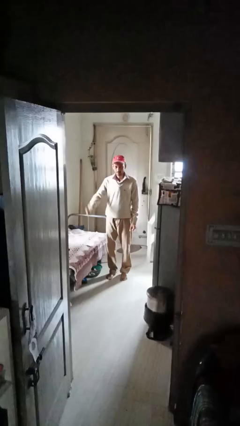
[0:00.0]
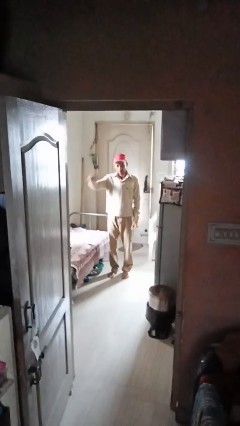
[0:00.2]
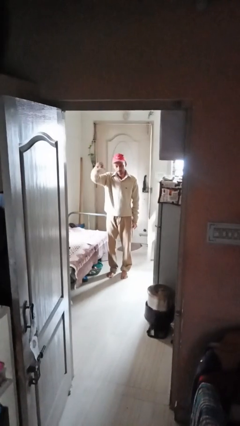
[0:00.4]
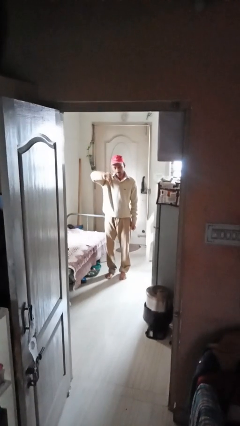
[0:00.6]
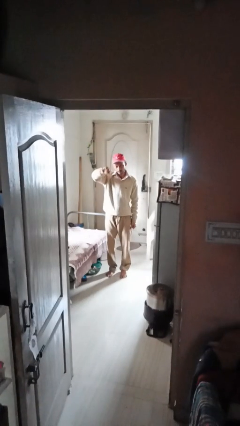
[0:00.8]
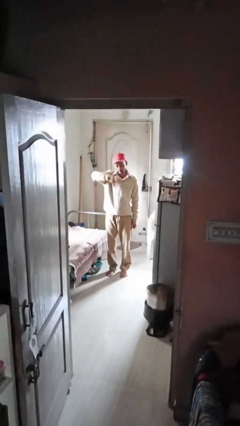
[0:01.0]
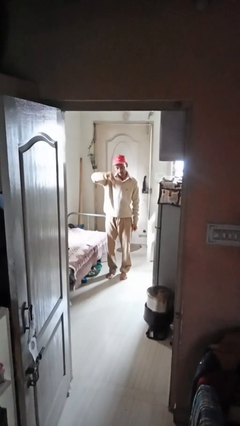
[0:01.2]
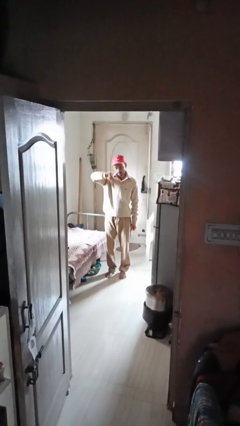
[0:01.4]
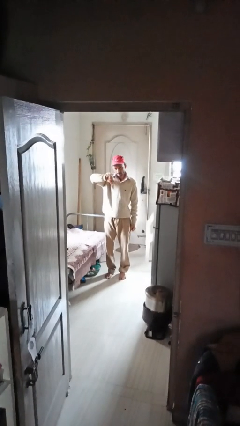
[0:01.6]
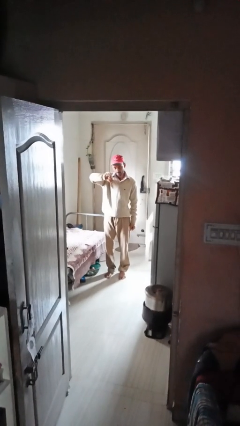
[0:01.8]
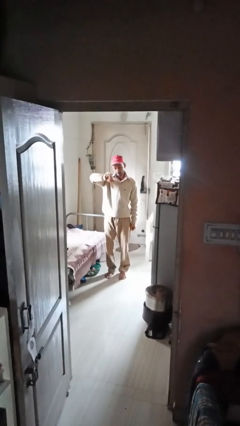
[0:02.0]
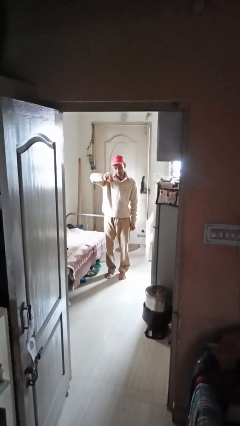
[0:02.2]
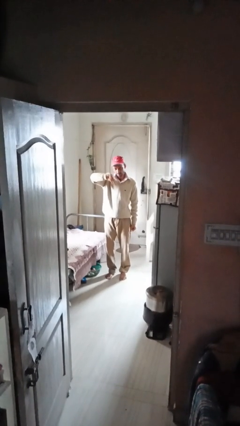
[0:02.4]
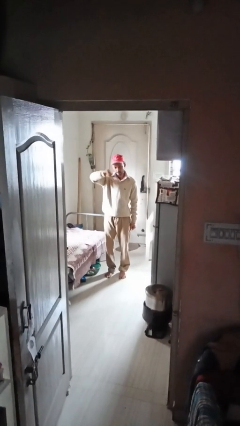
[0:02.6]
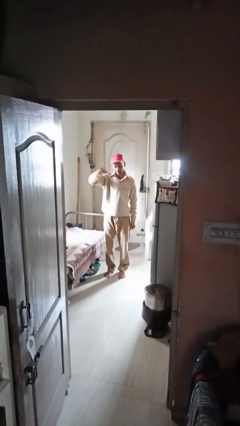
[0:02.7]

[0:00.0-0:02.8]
person gestures thumbs down

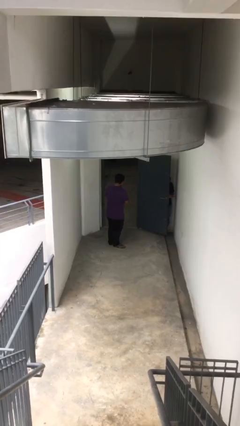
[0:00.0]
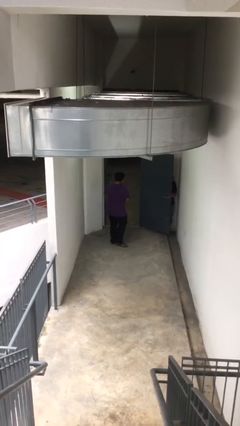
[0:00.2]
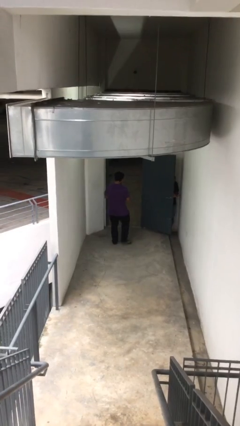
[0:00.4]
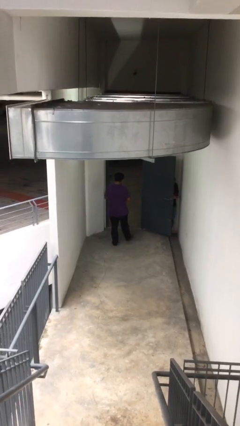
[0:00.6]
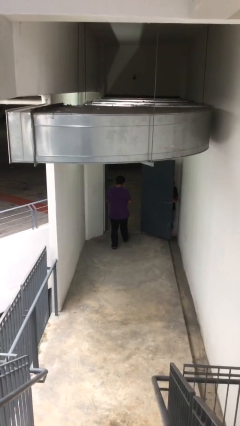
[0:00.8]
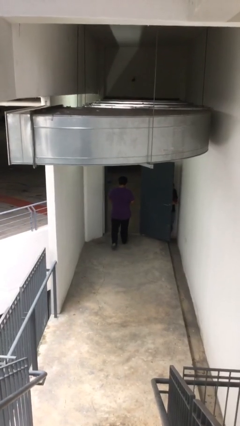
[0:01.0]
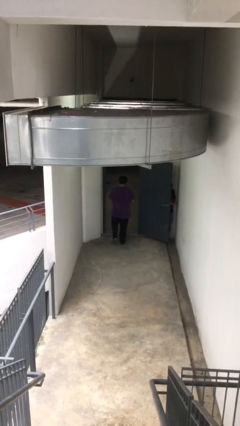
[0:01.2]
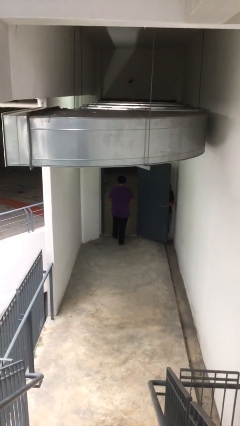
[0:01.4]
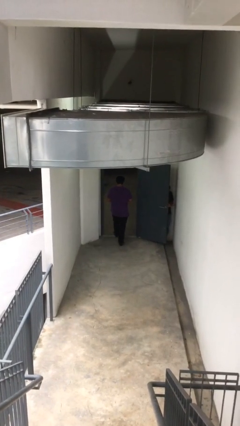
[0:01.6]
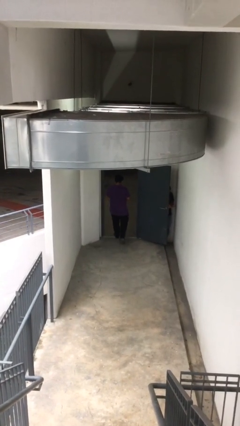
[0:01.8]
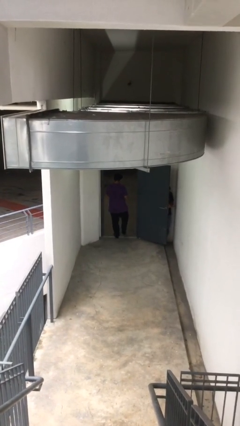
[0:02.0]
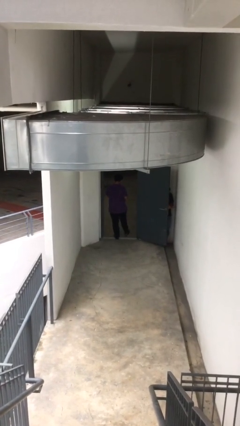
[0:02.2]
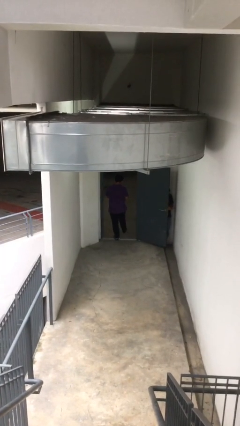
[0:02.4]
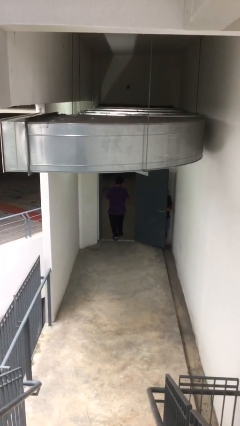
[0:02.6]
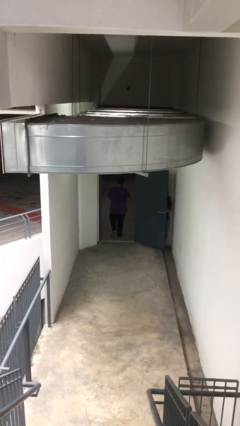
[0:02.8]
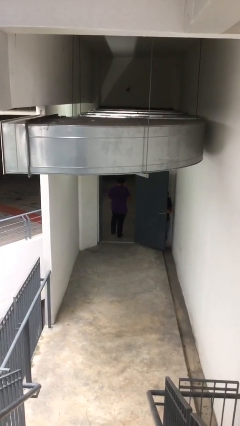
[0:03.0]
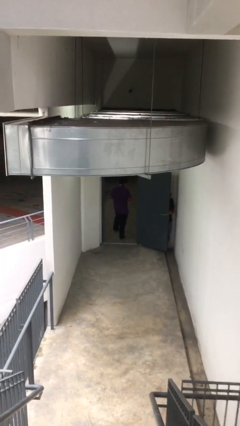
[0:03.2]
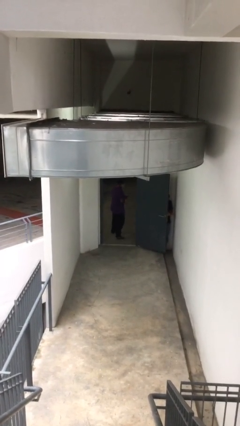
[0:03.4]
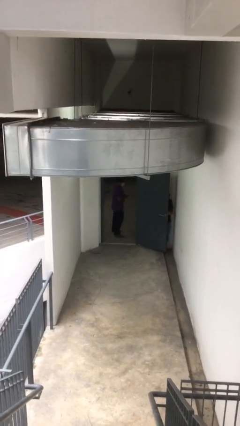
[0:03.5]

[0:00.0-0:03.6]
person exits scene through structure

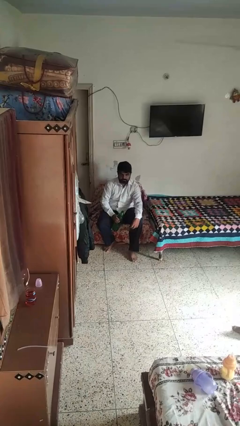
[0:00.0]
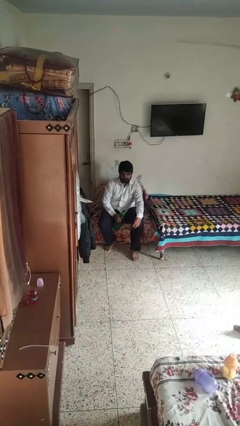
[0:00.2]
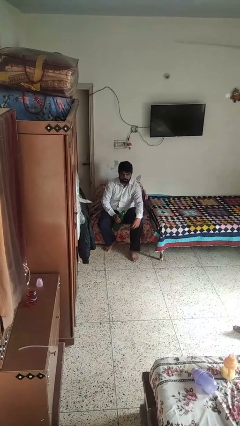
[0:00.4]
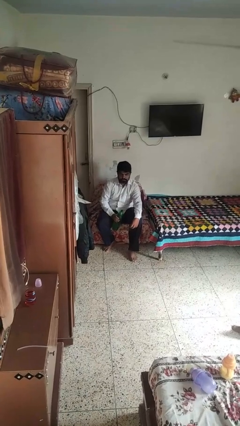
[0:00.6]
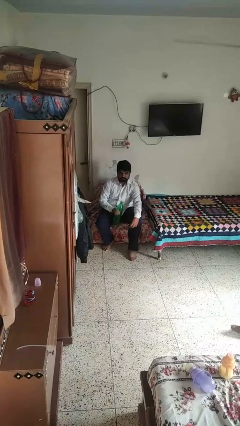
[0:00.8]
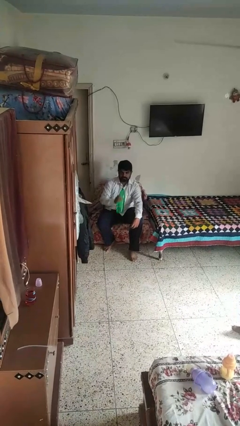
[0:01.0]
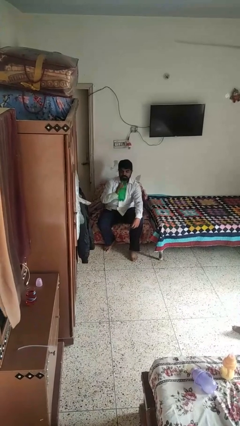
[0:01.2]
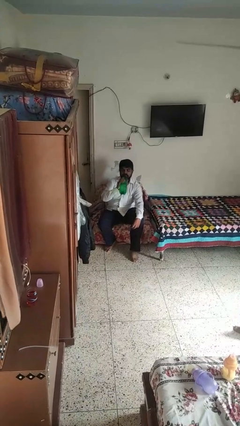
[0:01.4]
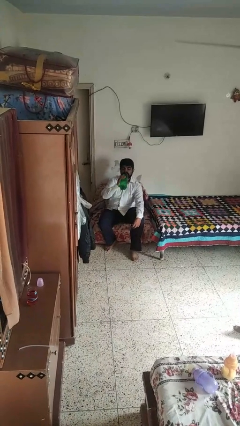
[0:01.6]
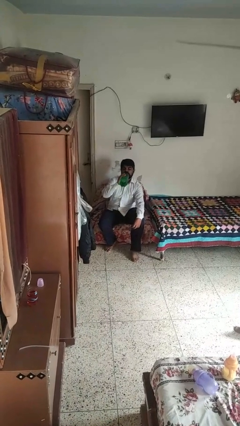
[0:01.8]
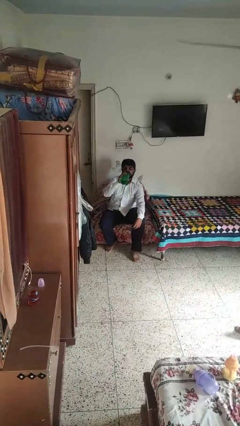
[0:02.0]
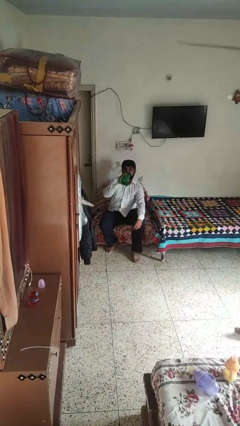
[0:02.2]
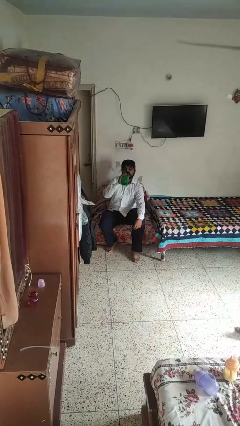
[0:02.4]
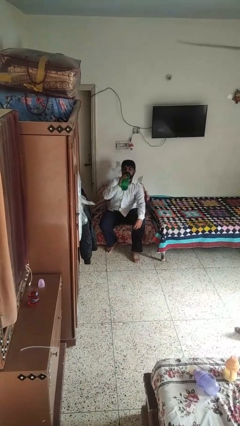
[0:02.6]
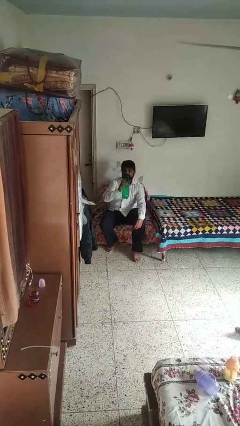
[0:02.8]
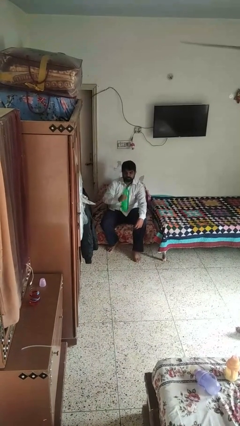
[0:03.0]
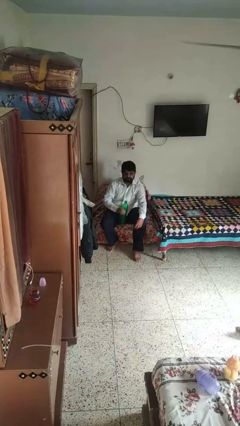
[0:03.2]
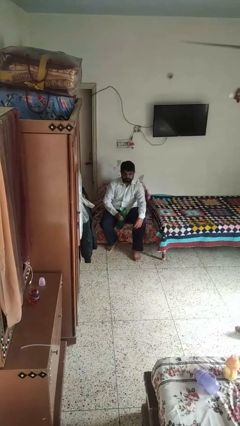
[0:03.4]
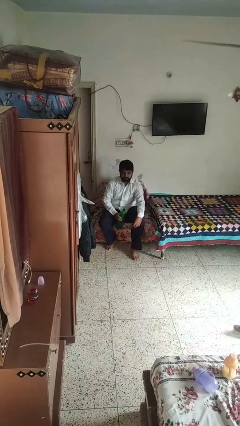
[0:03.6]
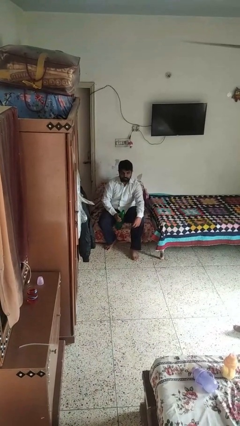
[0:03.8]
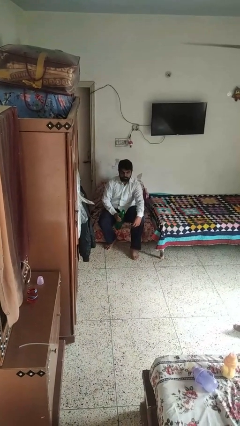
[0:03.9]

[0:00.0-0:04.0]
person drinks from bottle

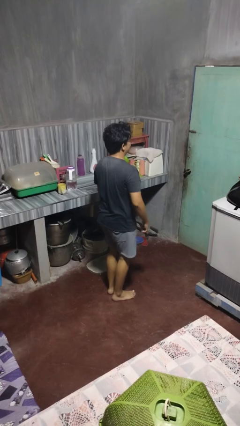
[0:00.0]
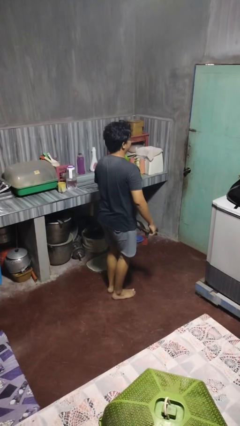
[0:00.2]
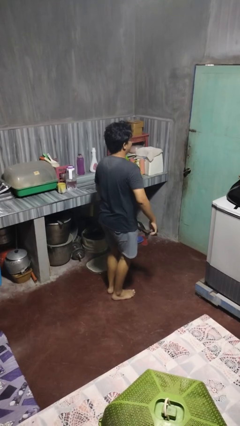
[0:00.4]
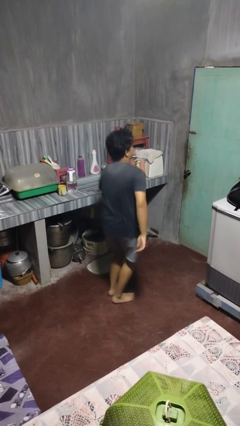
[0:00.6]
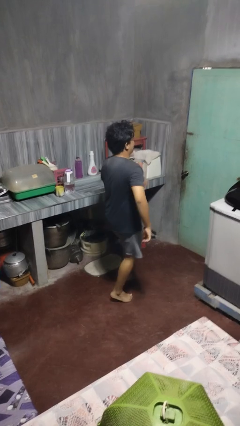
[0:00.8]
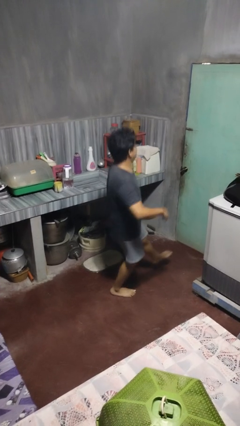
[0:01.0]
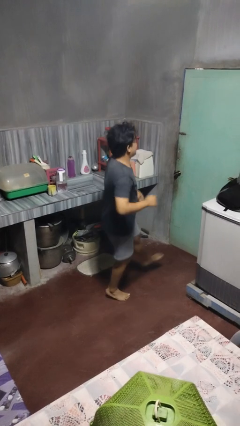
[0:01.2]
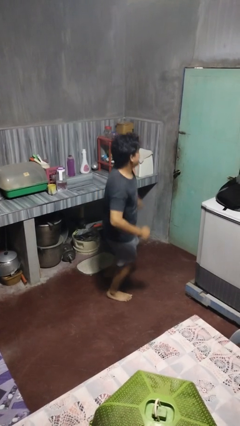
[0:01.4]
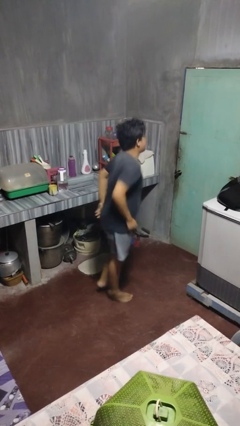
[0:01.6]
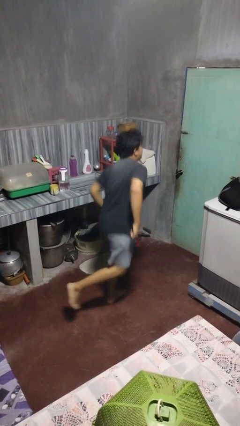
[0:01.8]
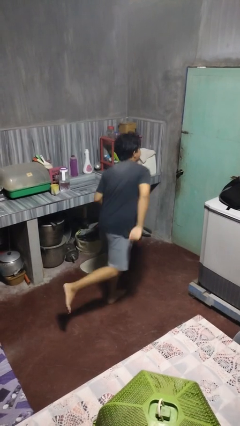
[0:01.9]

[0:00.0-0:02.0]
person dances in place

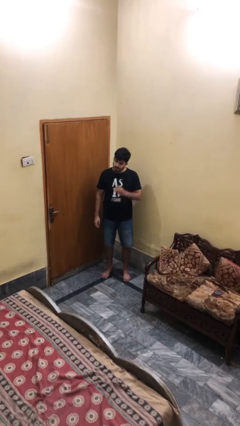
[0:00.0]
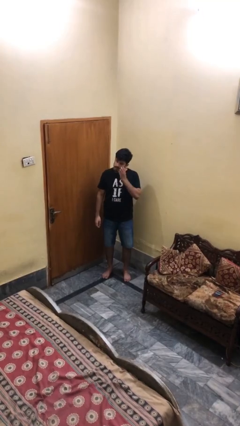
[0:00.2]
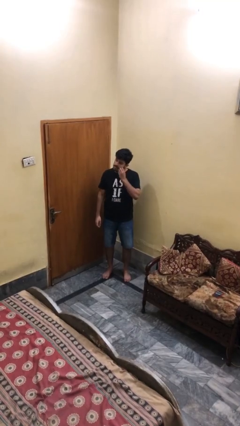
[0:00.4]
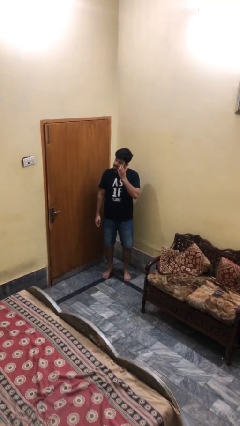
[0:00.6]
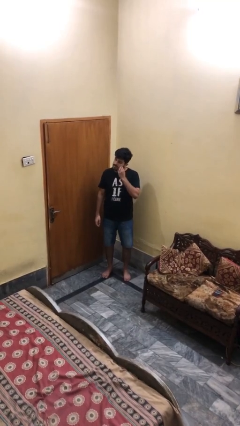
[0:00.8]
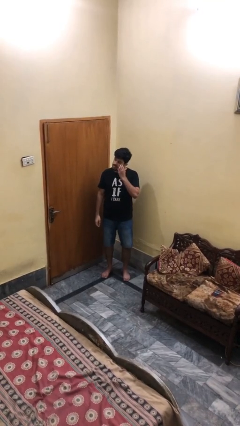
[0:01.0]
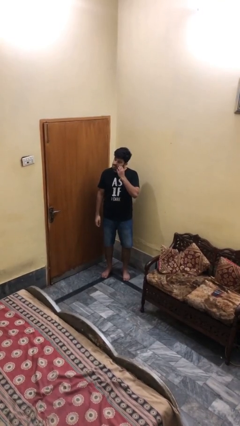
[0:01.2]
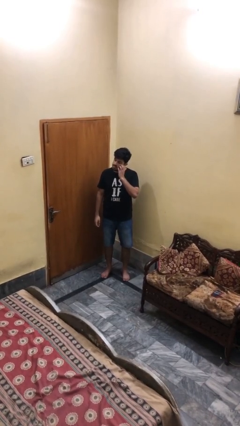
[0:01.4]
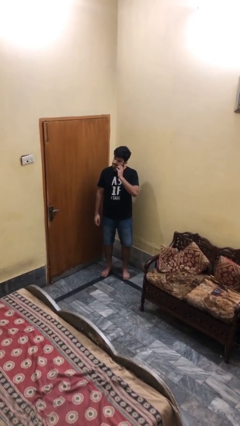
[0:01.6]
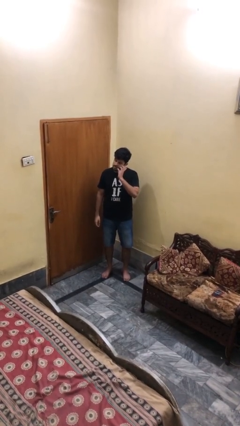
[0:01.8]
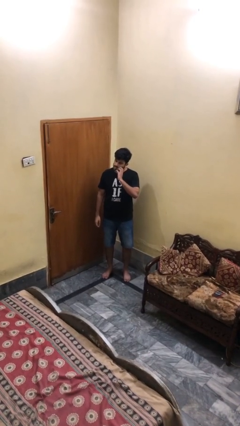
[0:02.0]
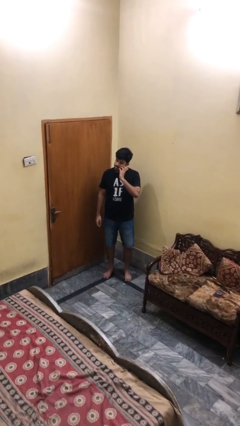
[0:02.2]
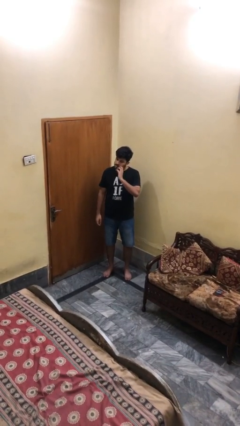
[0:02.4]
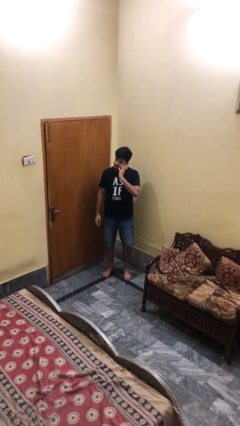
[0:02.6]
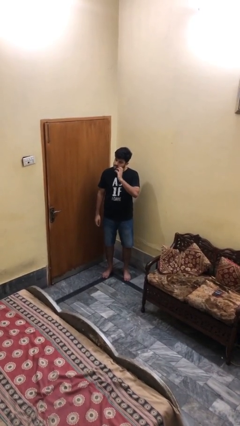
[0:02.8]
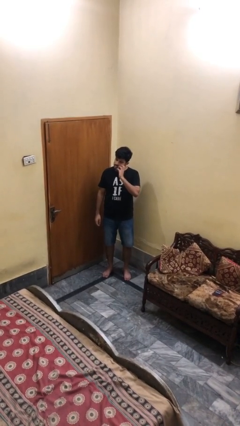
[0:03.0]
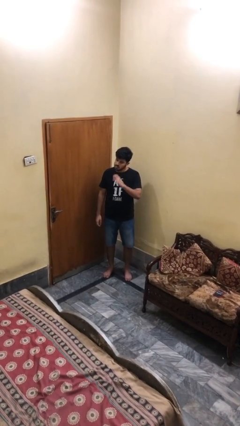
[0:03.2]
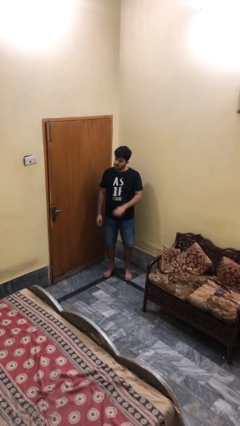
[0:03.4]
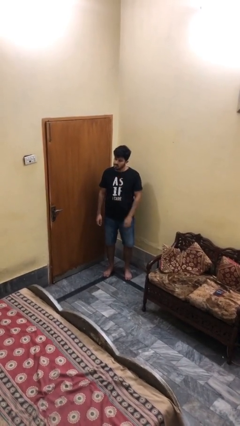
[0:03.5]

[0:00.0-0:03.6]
person scratches face

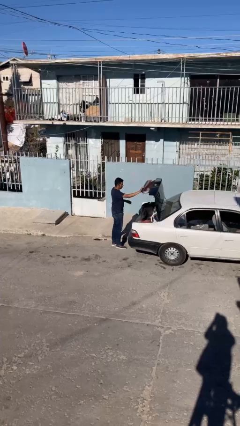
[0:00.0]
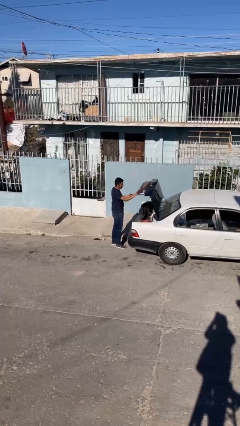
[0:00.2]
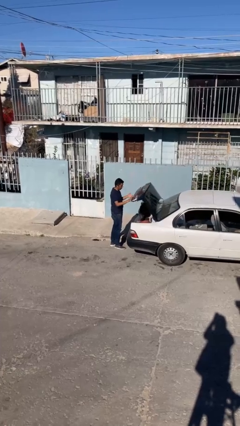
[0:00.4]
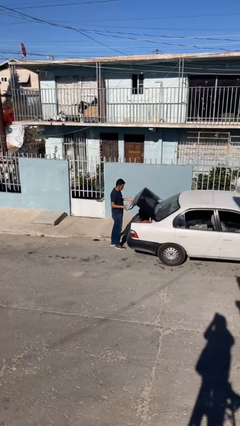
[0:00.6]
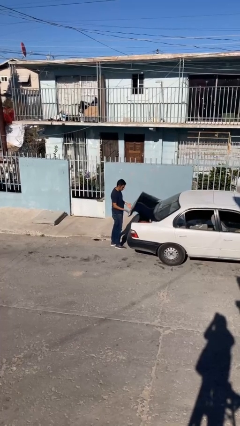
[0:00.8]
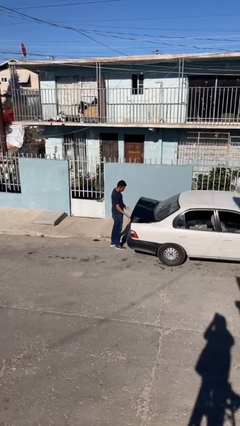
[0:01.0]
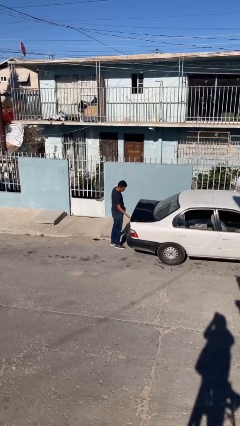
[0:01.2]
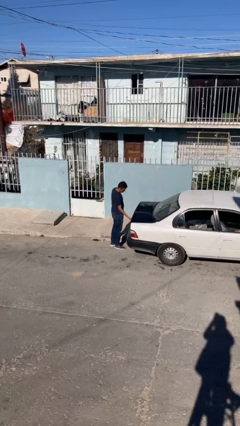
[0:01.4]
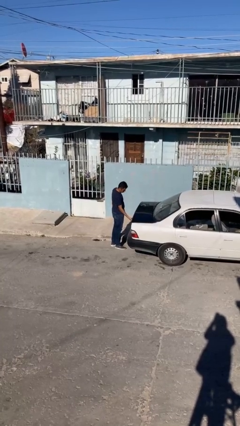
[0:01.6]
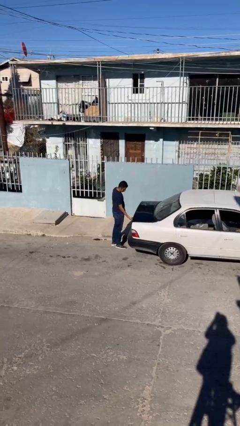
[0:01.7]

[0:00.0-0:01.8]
person closes car trunk
